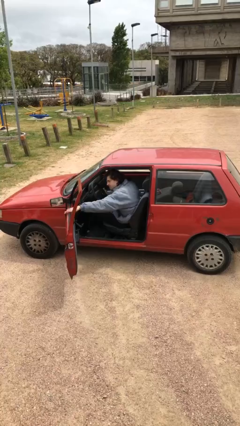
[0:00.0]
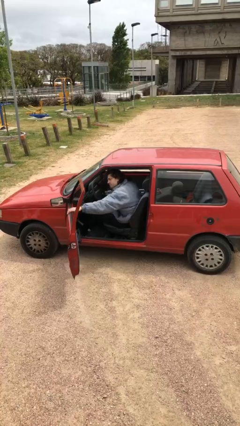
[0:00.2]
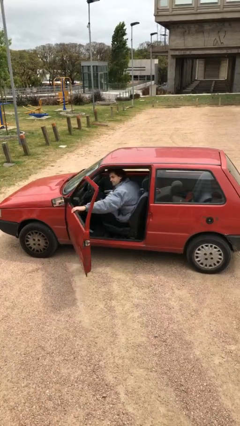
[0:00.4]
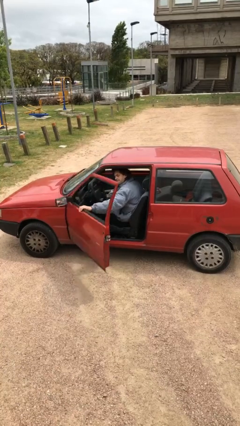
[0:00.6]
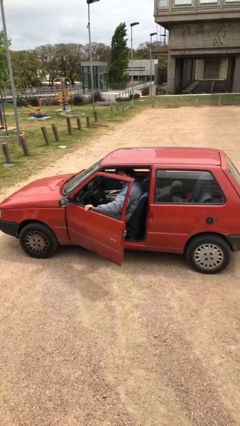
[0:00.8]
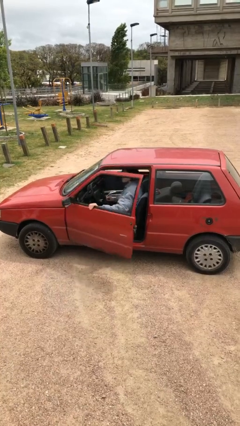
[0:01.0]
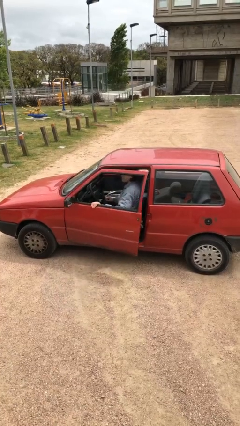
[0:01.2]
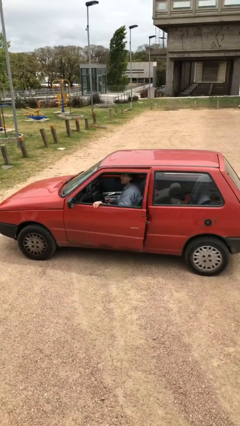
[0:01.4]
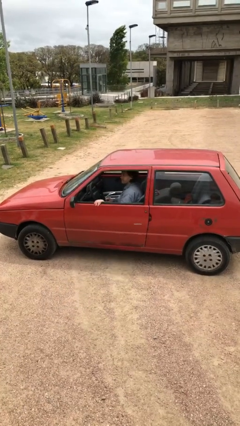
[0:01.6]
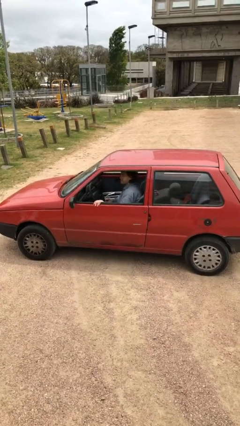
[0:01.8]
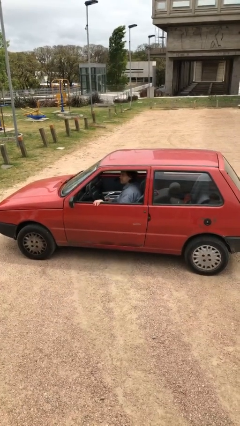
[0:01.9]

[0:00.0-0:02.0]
person closes car door

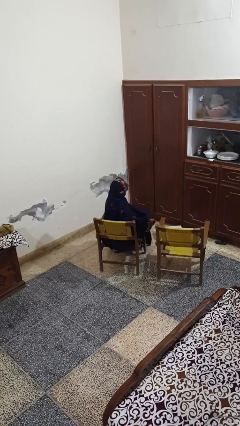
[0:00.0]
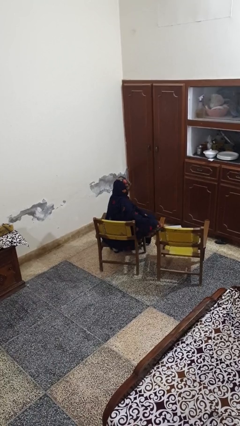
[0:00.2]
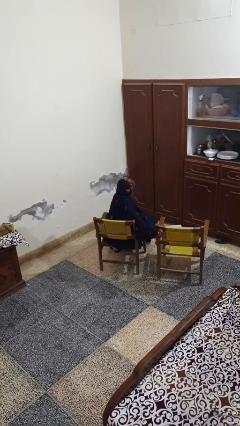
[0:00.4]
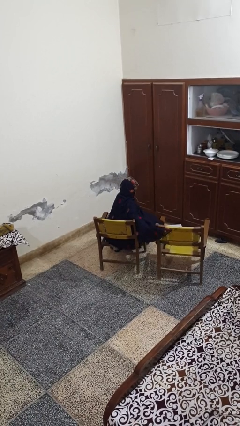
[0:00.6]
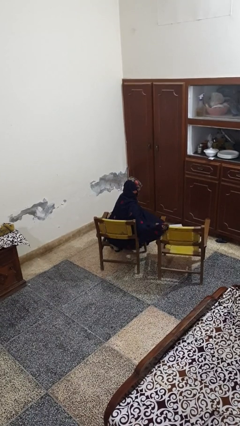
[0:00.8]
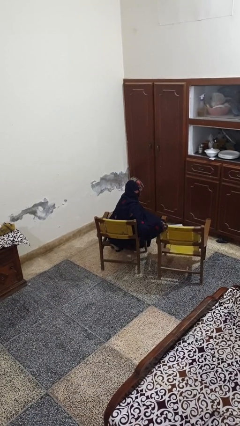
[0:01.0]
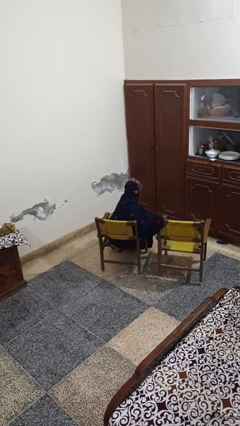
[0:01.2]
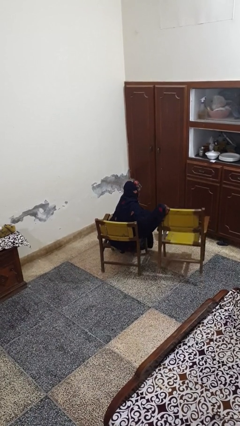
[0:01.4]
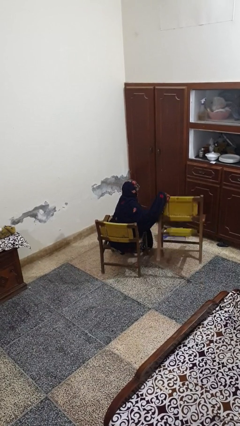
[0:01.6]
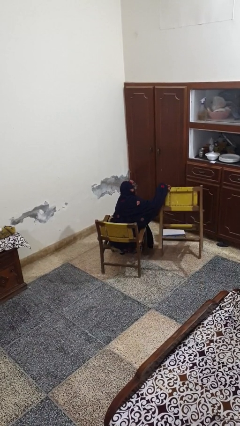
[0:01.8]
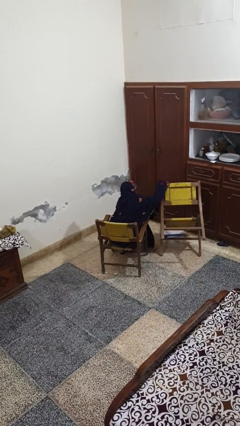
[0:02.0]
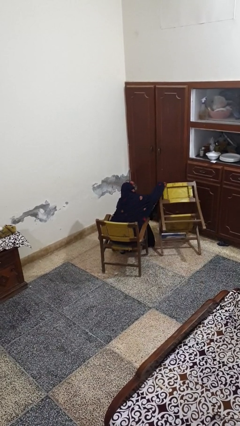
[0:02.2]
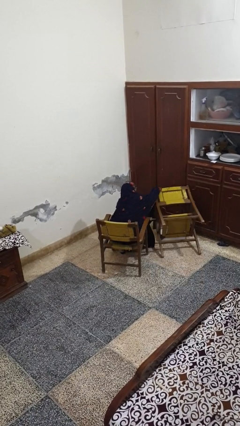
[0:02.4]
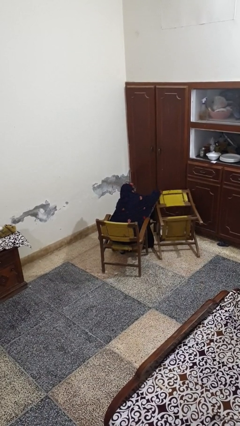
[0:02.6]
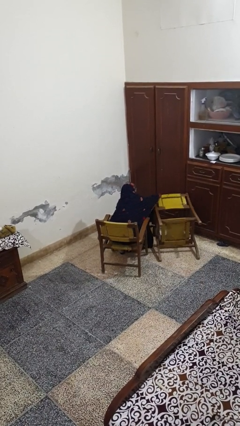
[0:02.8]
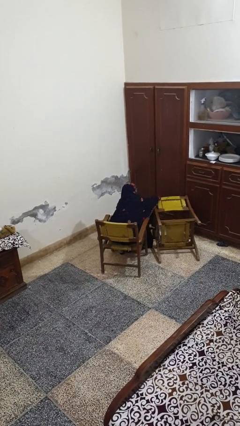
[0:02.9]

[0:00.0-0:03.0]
person knocks over furniture

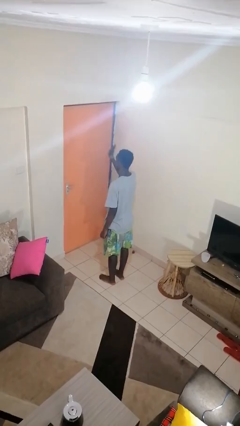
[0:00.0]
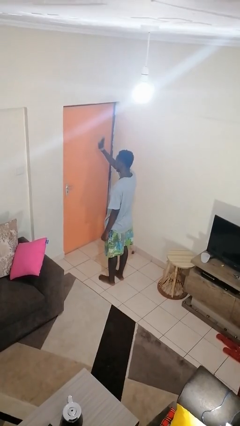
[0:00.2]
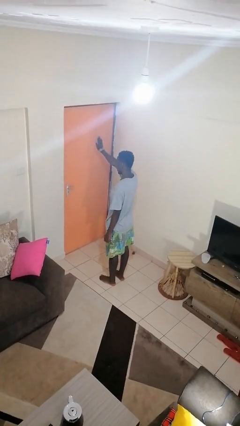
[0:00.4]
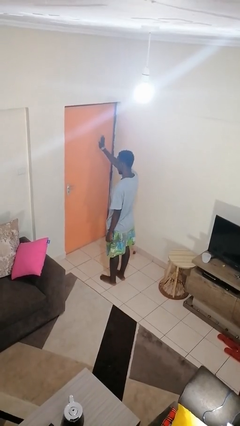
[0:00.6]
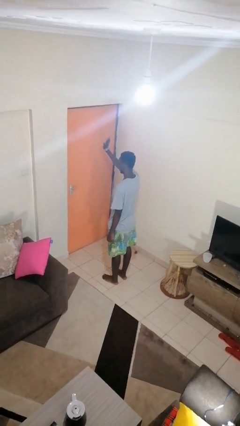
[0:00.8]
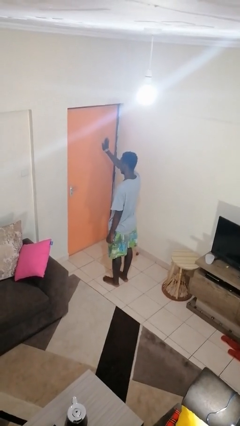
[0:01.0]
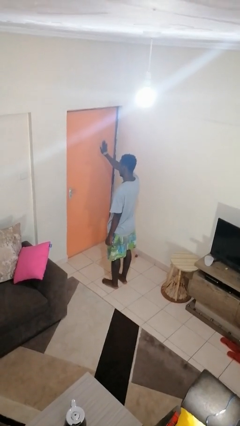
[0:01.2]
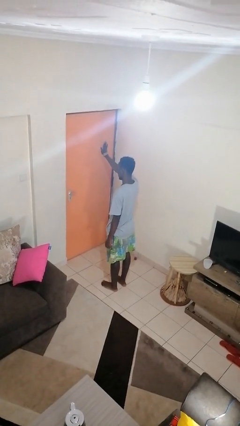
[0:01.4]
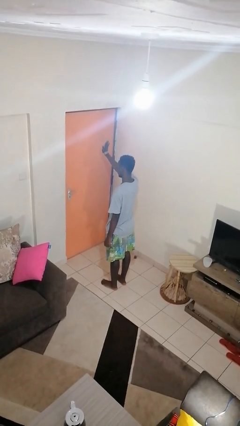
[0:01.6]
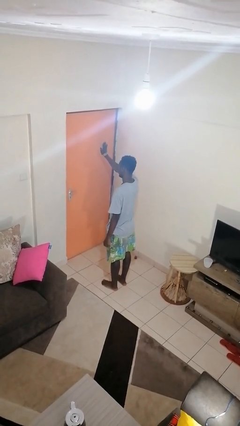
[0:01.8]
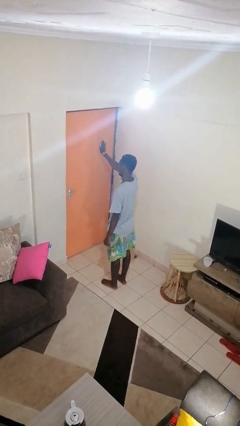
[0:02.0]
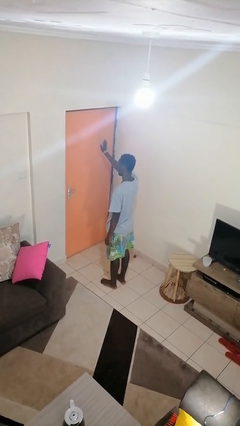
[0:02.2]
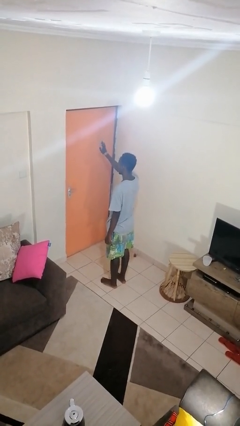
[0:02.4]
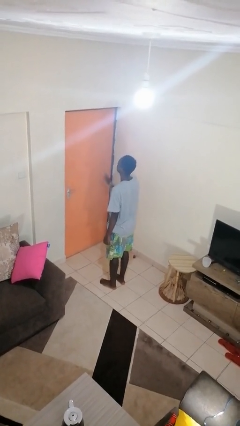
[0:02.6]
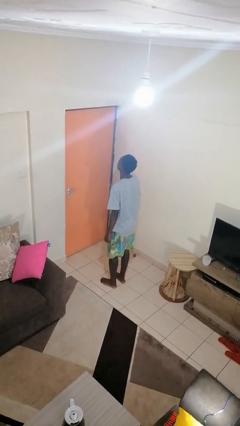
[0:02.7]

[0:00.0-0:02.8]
person gestures stop

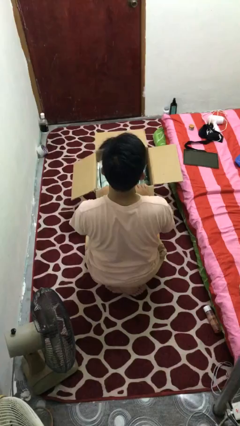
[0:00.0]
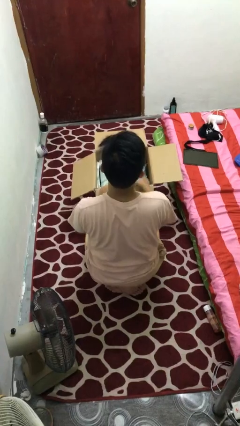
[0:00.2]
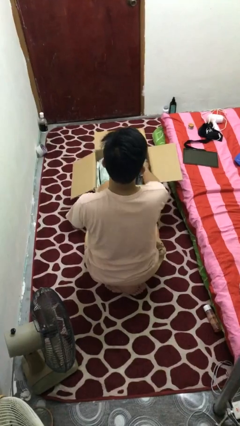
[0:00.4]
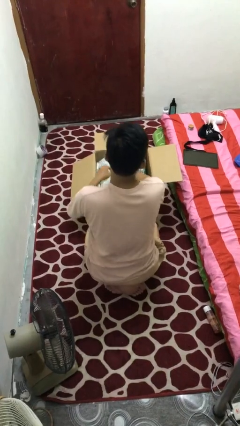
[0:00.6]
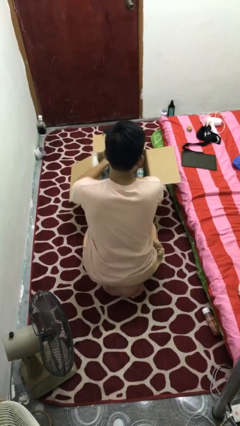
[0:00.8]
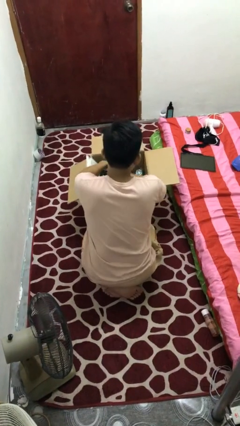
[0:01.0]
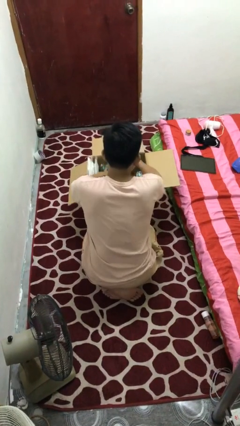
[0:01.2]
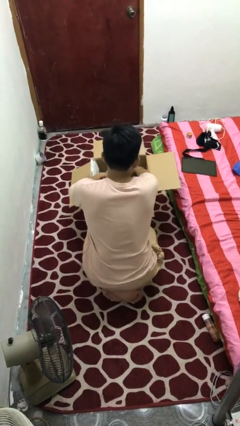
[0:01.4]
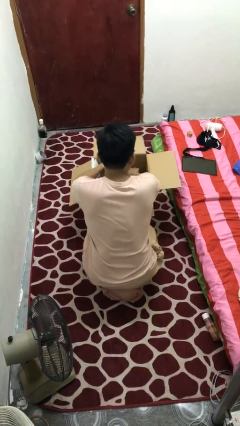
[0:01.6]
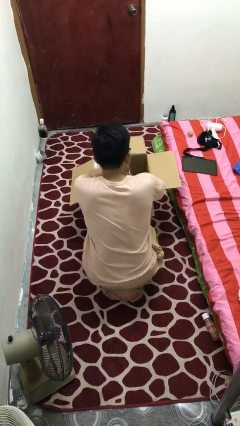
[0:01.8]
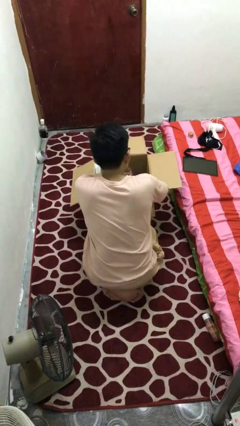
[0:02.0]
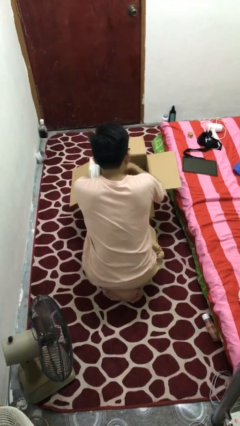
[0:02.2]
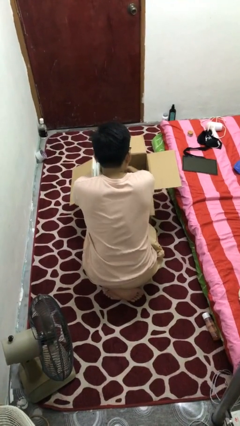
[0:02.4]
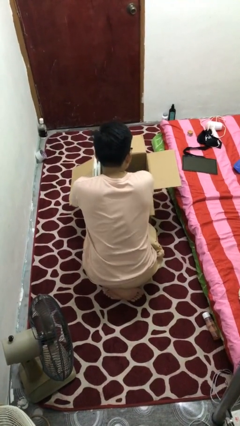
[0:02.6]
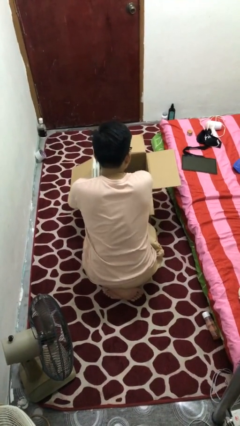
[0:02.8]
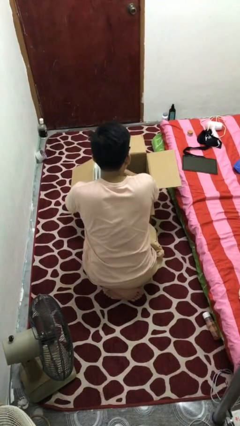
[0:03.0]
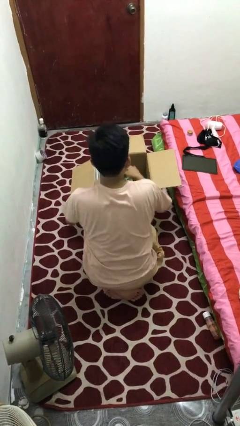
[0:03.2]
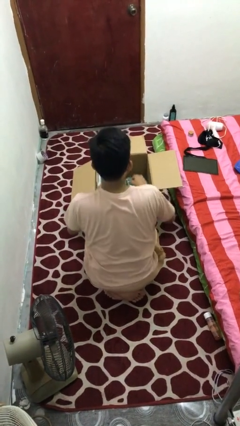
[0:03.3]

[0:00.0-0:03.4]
person searches in box

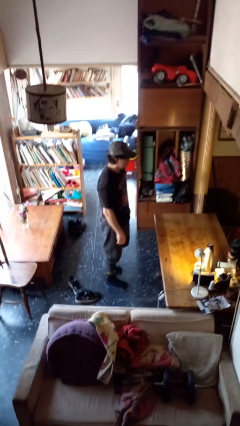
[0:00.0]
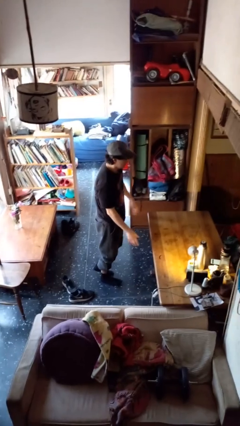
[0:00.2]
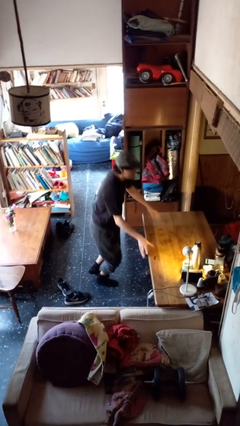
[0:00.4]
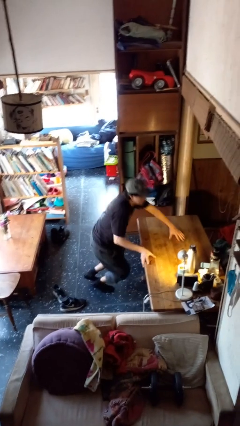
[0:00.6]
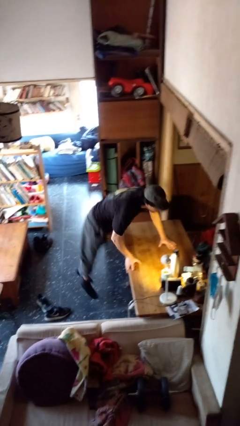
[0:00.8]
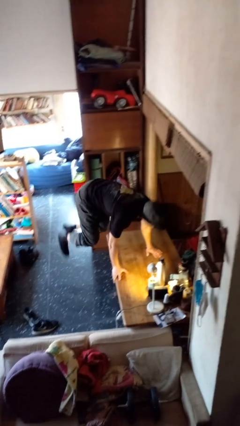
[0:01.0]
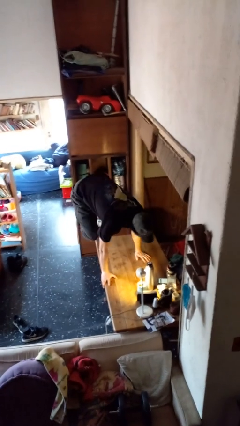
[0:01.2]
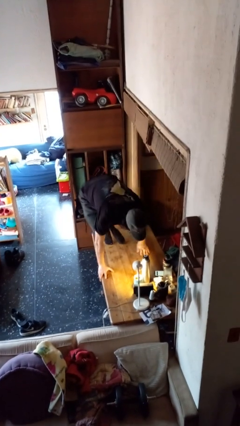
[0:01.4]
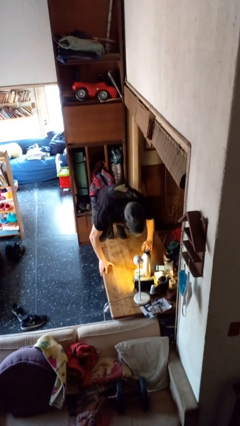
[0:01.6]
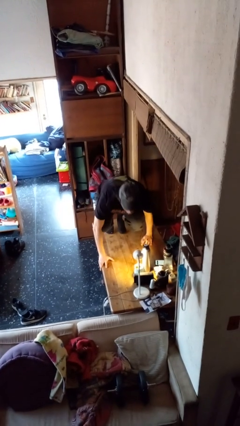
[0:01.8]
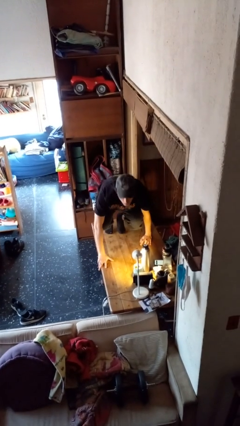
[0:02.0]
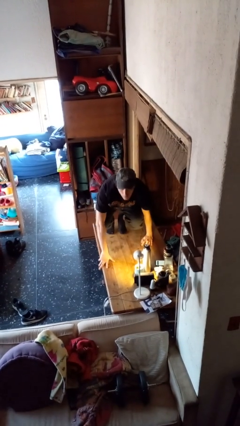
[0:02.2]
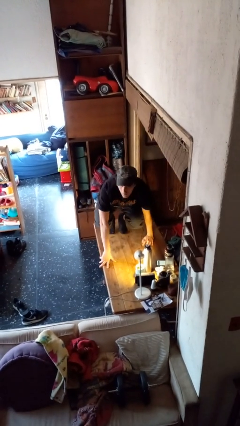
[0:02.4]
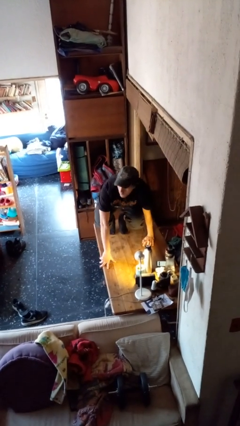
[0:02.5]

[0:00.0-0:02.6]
person climbs on table

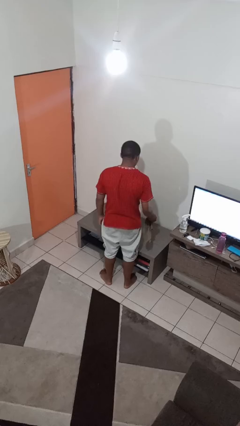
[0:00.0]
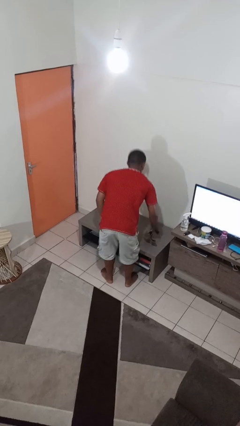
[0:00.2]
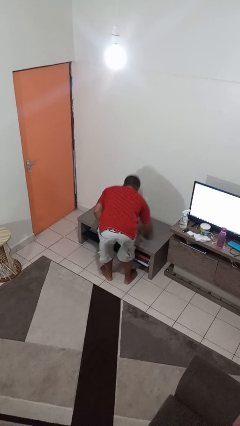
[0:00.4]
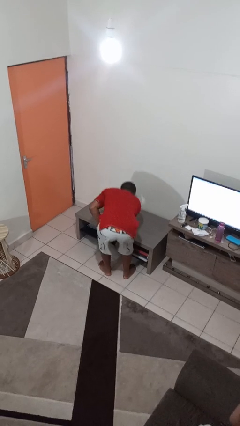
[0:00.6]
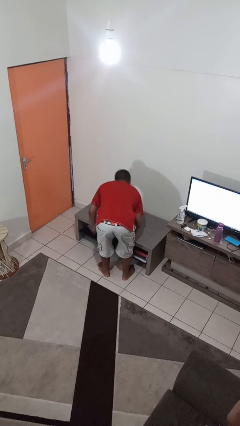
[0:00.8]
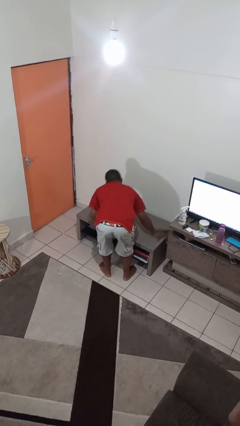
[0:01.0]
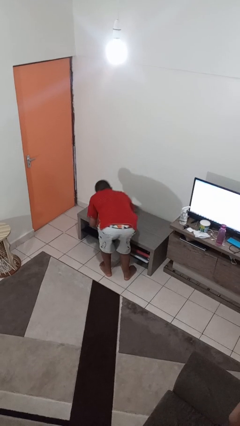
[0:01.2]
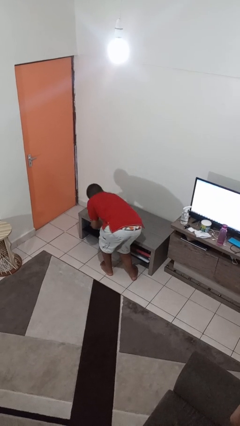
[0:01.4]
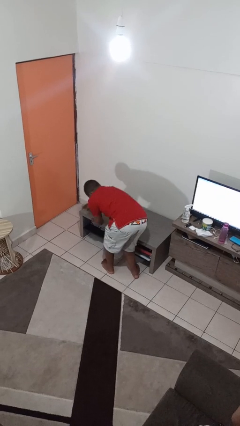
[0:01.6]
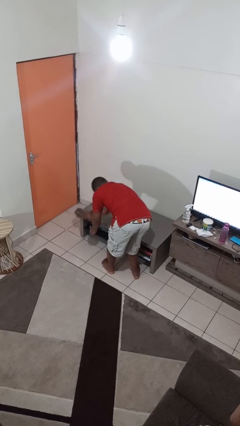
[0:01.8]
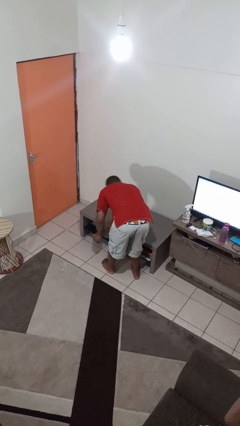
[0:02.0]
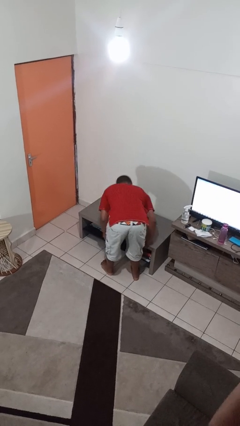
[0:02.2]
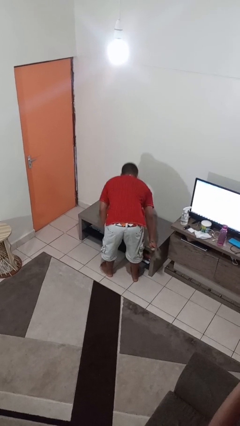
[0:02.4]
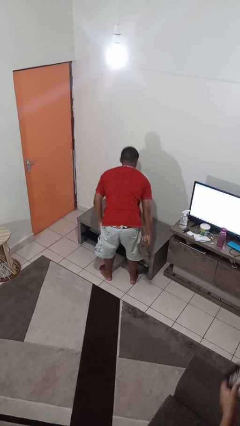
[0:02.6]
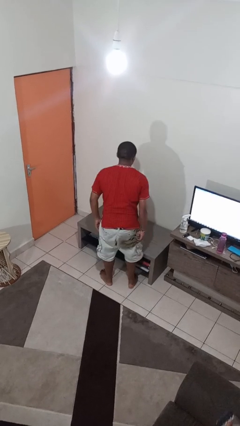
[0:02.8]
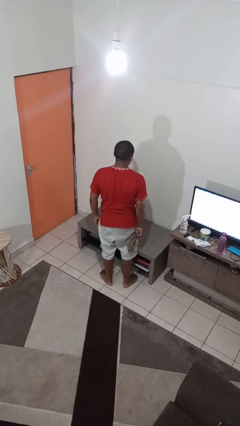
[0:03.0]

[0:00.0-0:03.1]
person cleans table with rag

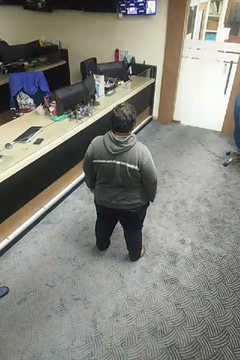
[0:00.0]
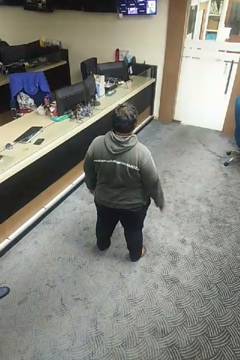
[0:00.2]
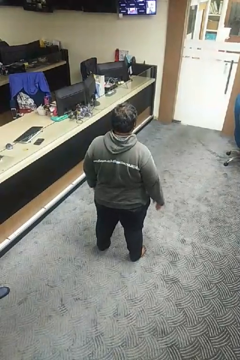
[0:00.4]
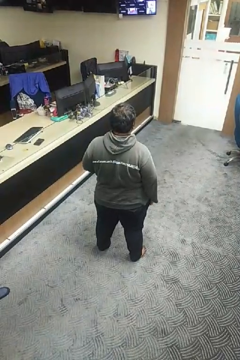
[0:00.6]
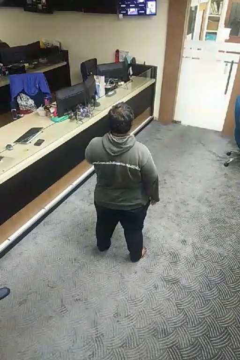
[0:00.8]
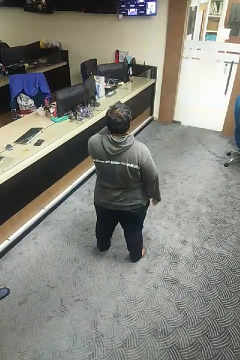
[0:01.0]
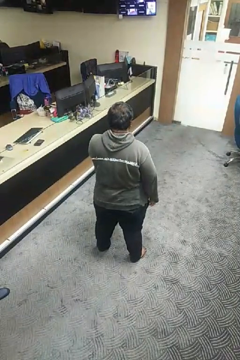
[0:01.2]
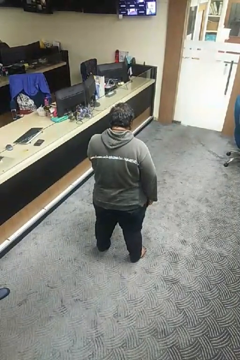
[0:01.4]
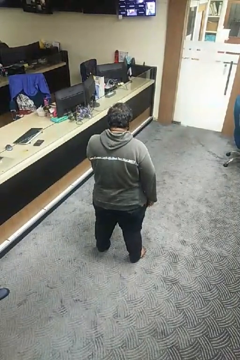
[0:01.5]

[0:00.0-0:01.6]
person sneezes into hand
